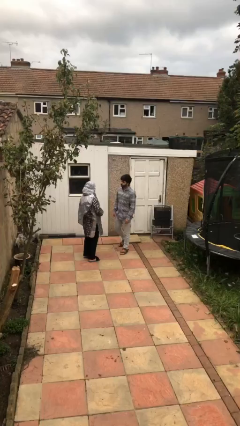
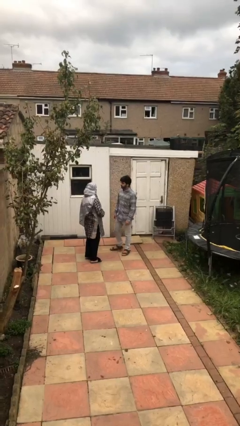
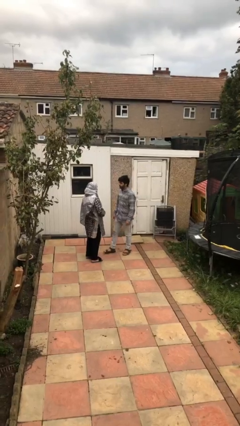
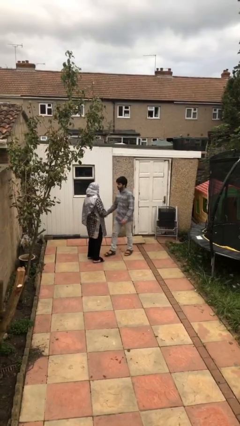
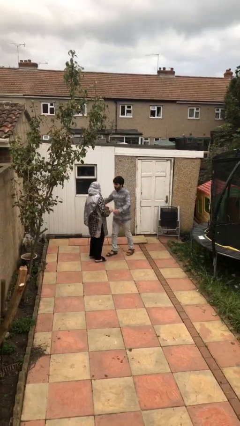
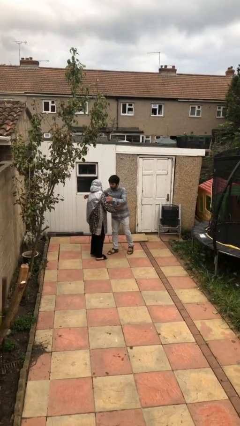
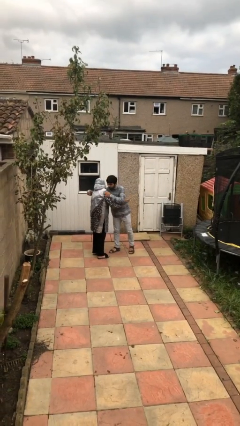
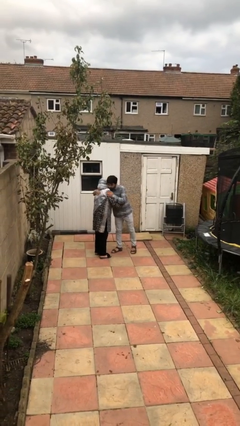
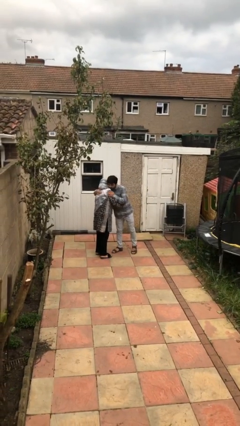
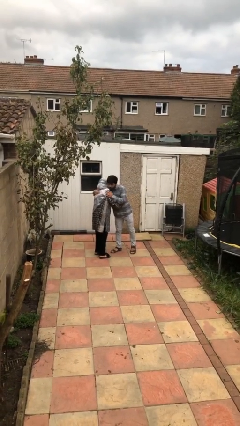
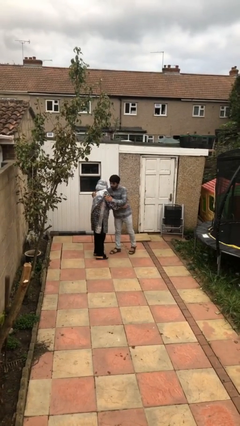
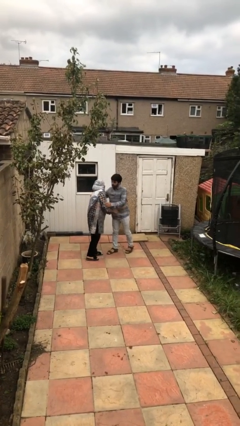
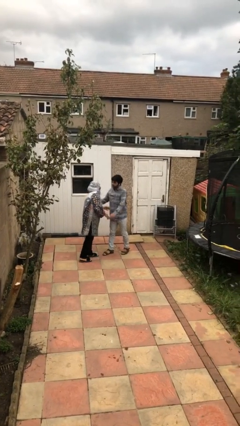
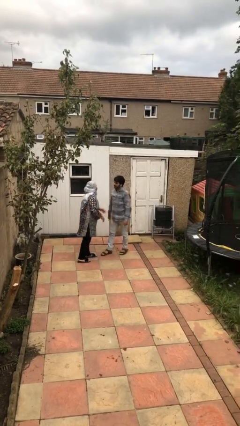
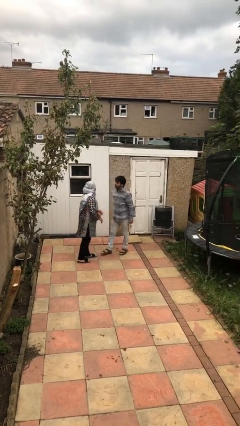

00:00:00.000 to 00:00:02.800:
person embraces person

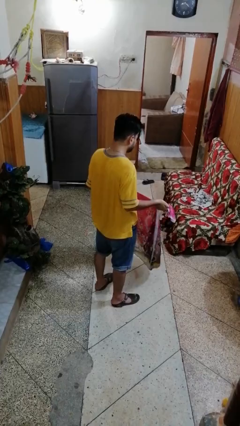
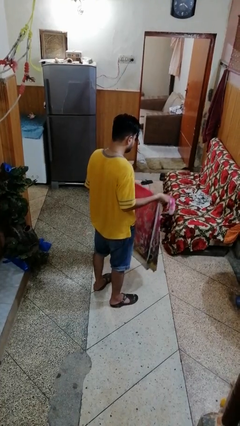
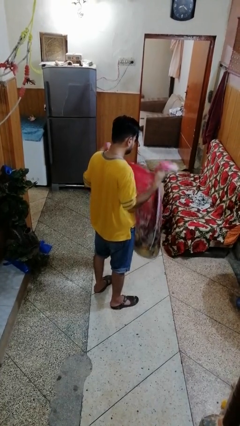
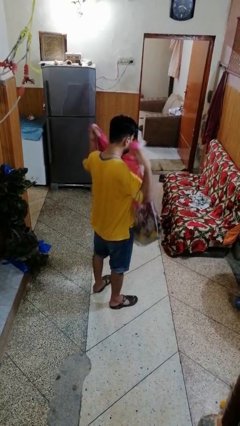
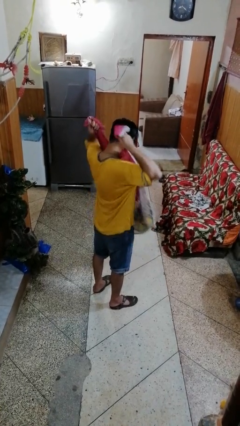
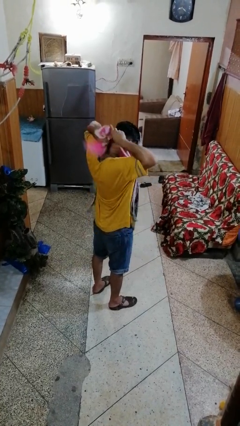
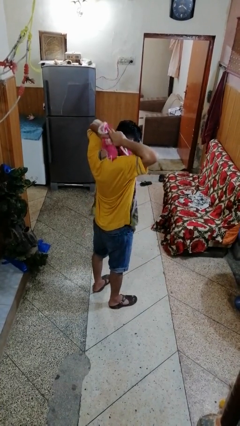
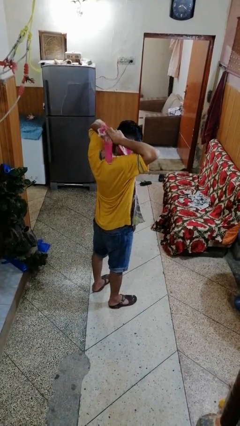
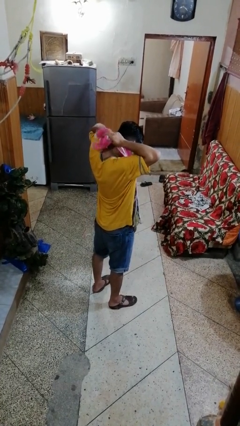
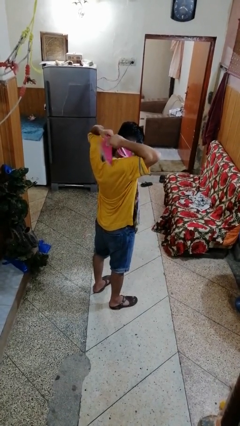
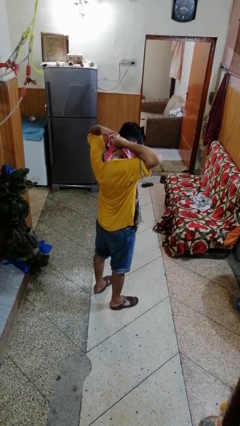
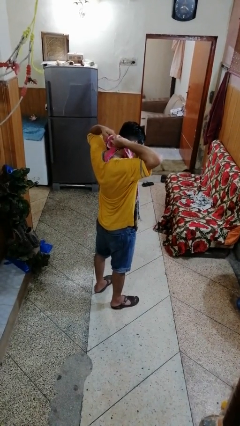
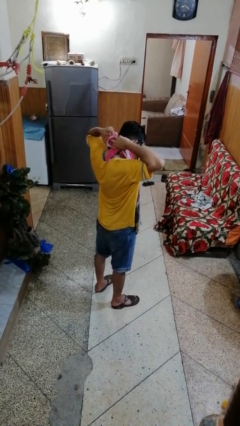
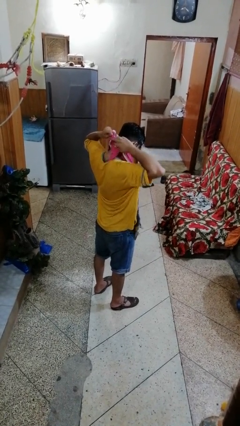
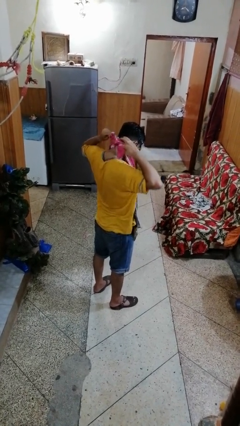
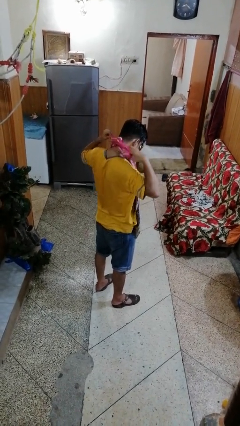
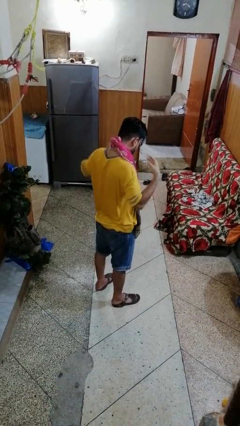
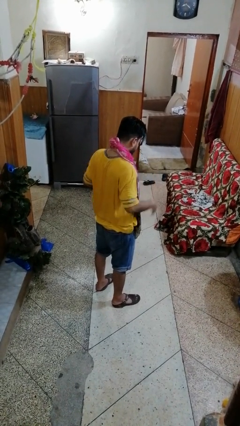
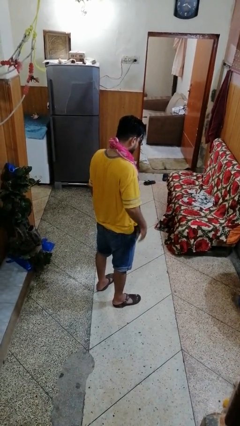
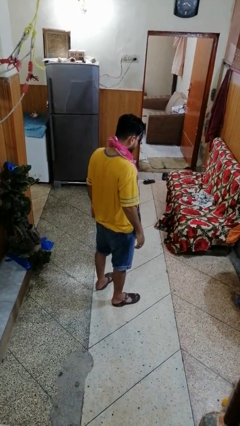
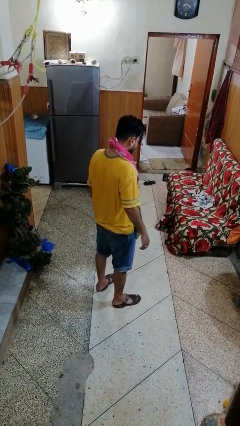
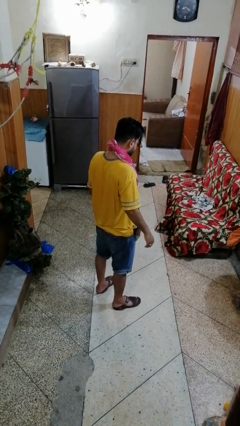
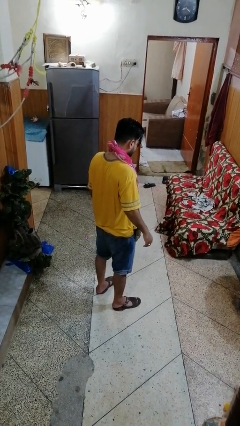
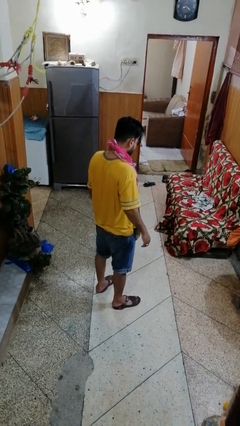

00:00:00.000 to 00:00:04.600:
person puts on apron

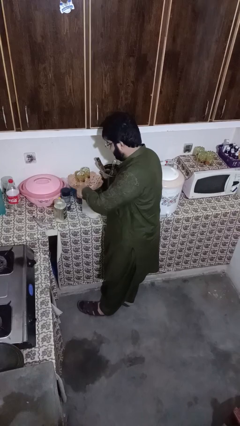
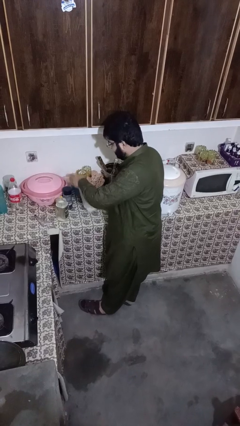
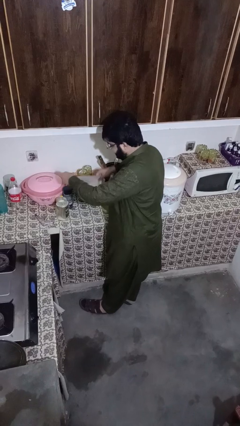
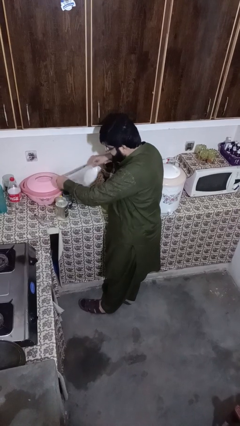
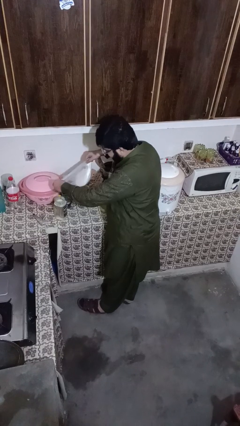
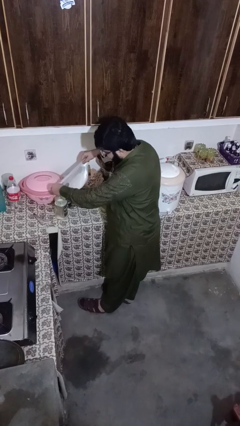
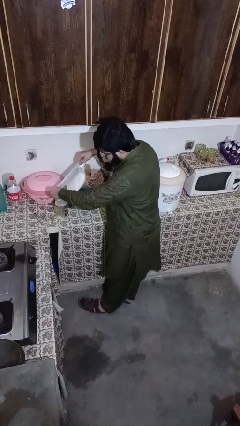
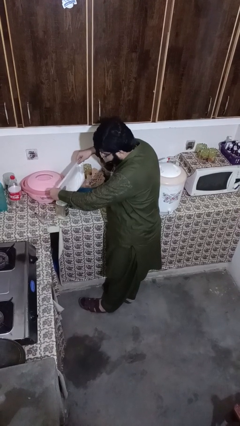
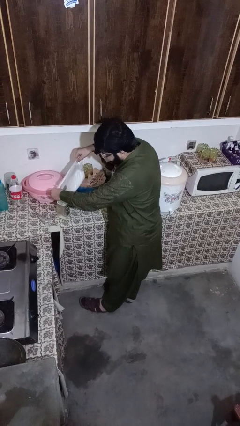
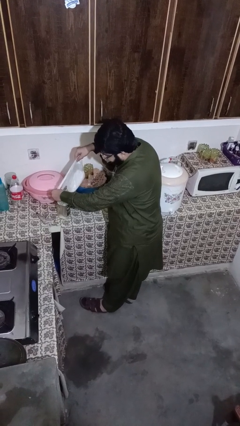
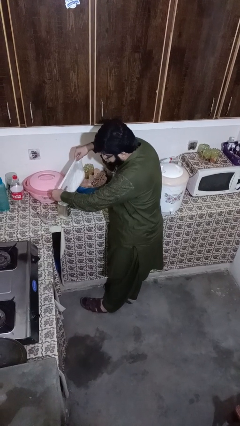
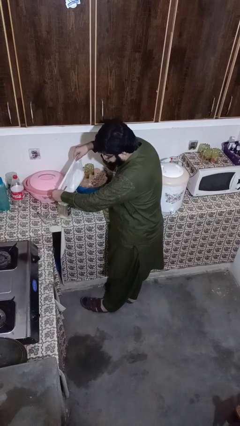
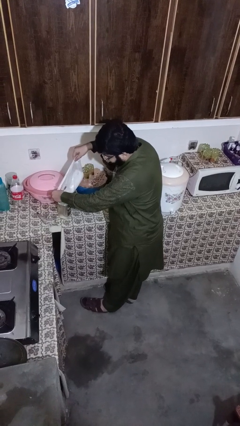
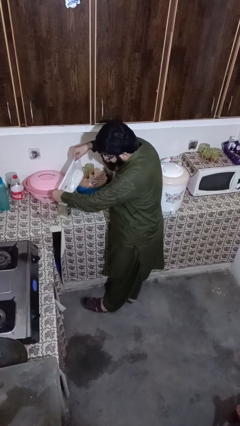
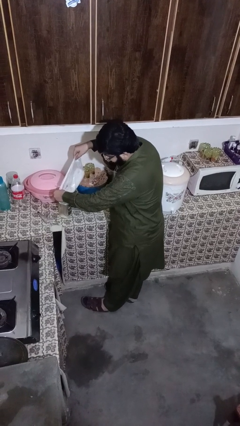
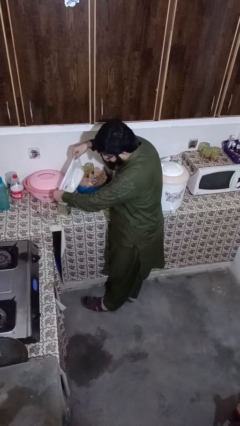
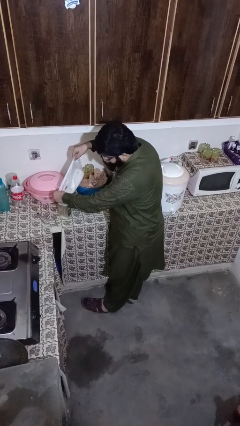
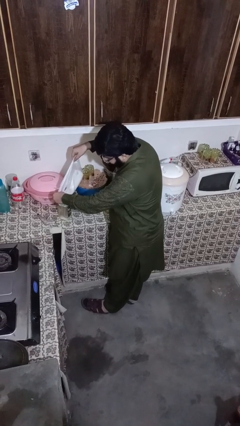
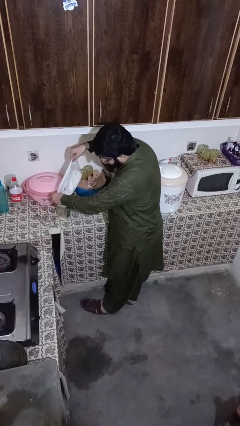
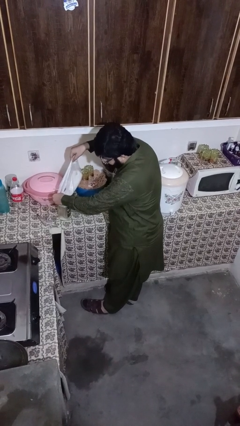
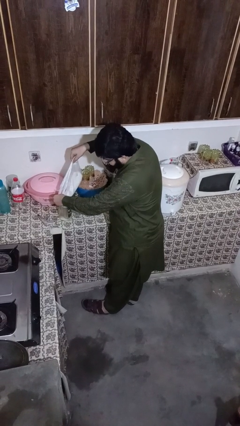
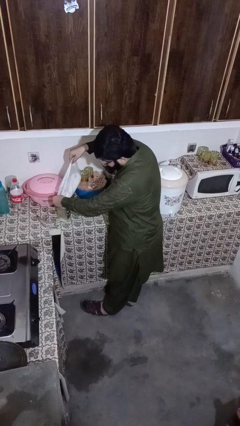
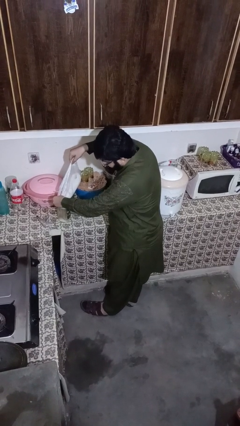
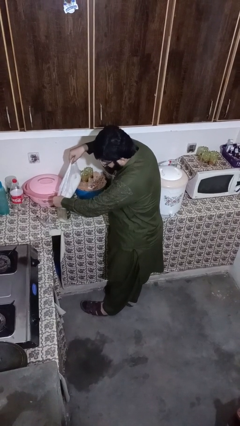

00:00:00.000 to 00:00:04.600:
person pours into bowl

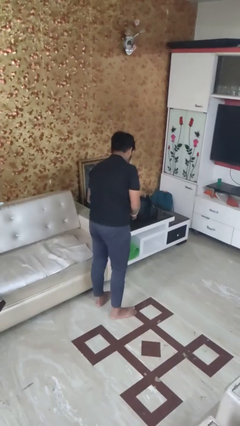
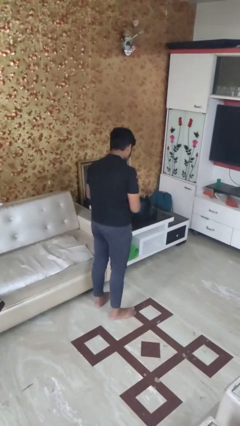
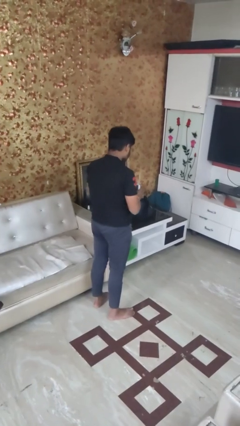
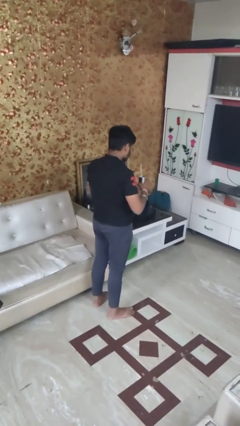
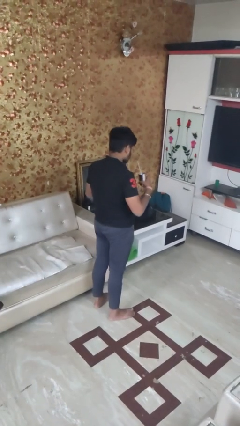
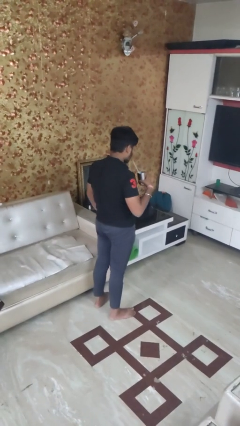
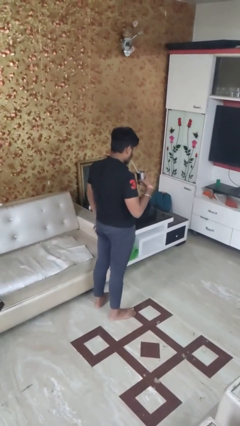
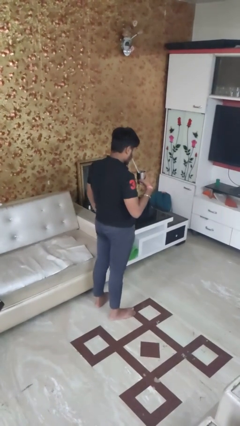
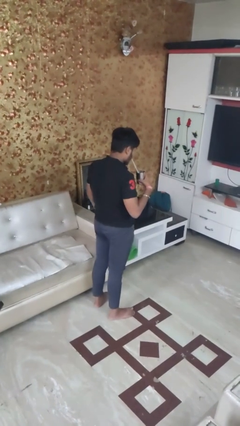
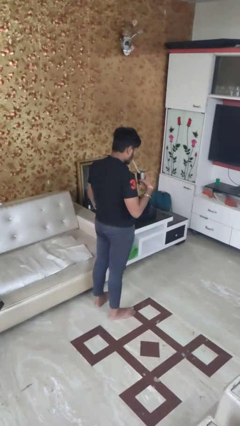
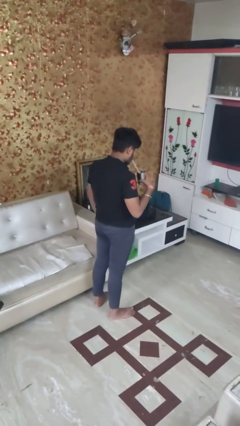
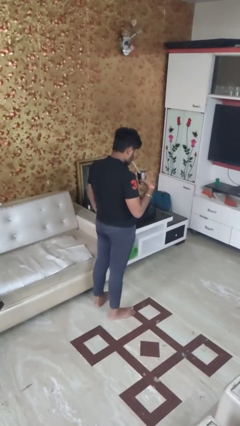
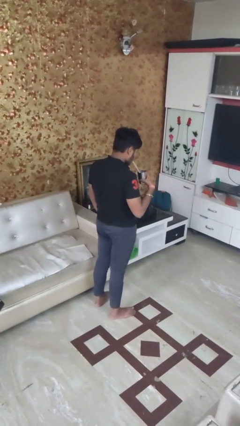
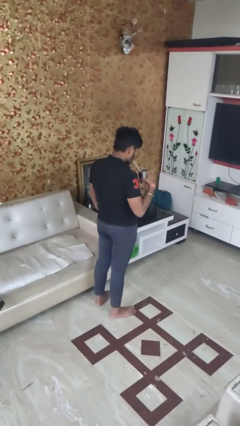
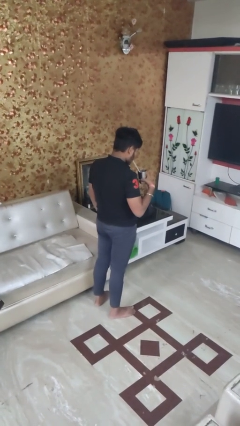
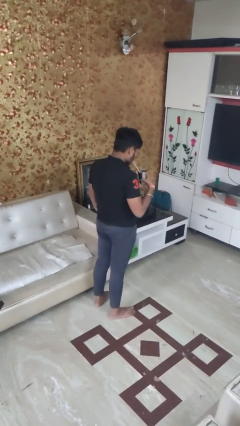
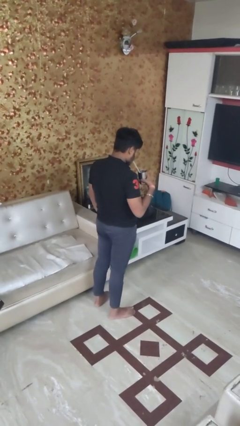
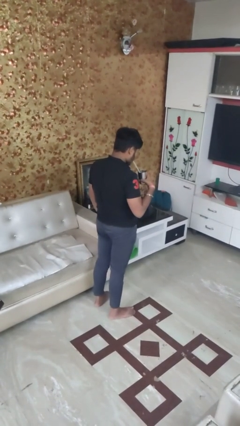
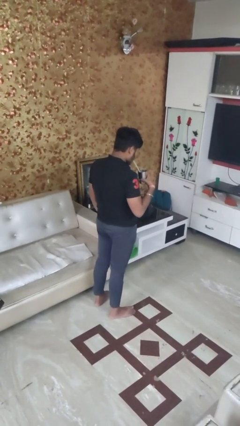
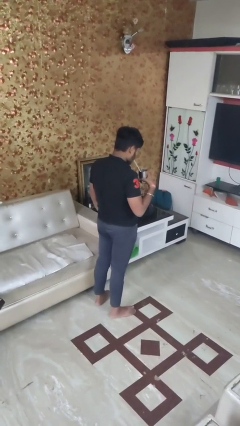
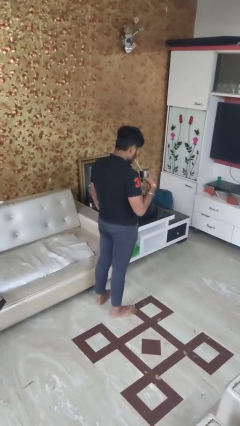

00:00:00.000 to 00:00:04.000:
person drinks from straw

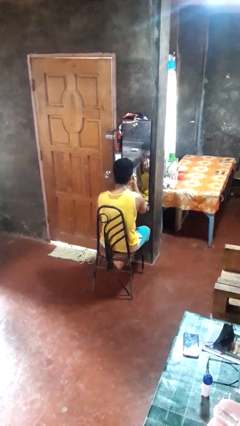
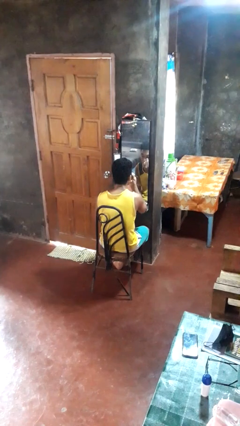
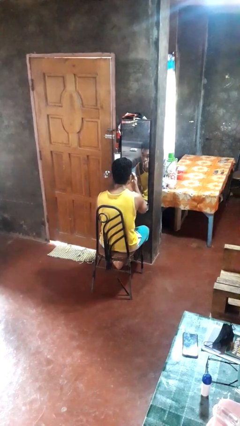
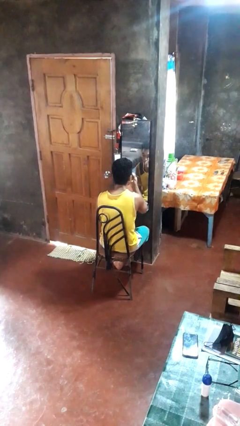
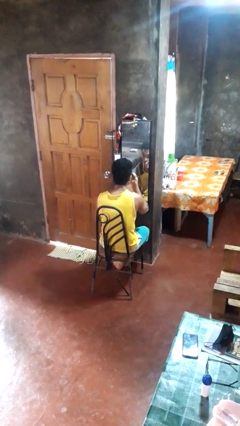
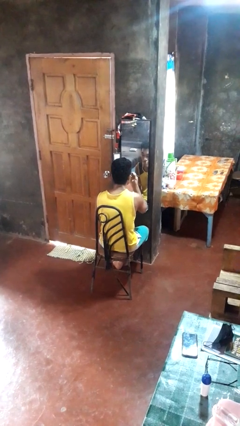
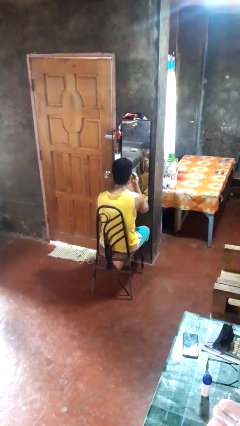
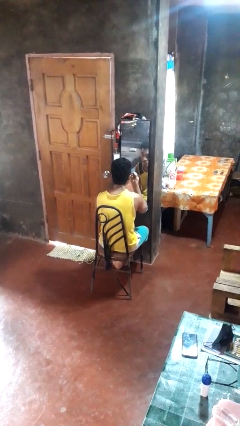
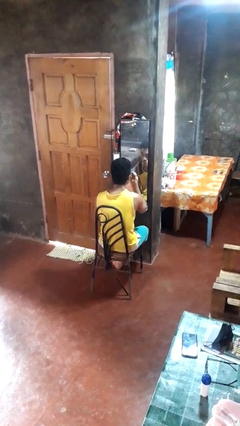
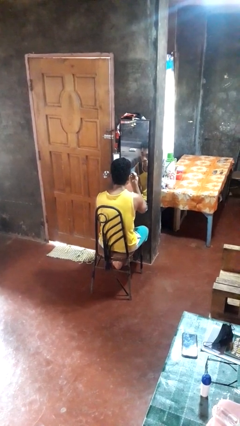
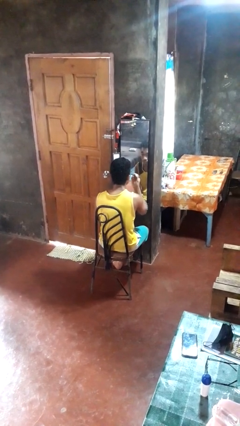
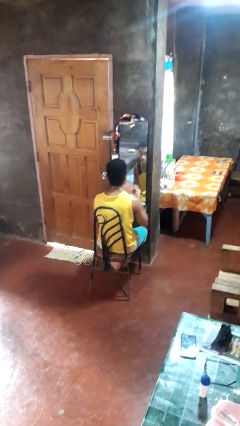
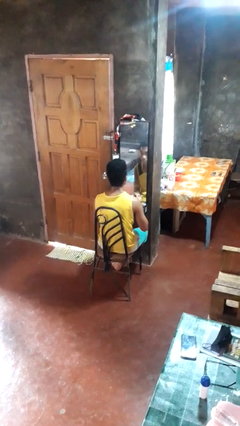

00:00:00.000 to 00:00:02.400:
person applies eye makeup
